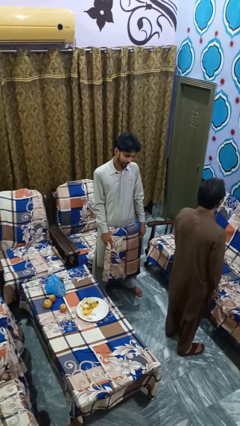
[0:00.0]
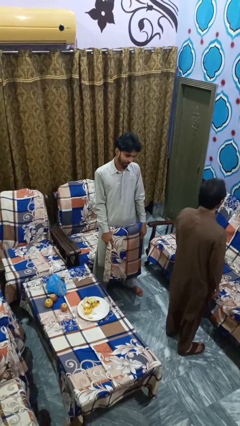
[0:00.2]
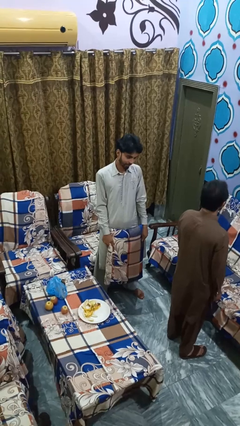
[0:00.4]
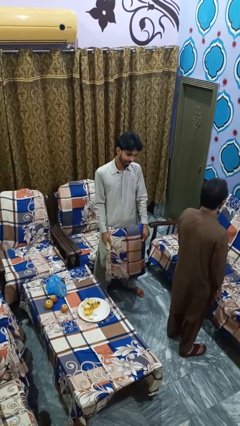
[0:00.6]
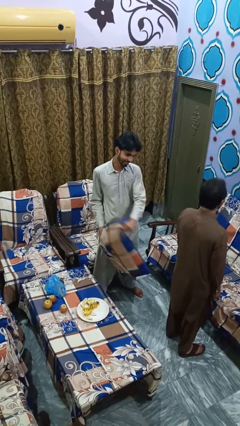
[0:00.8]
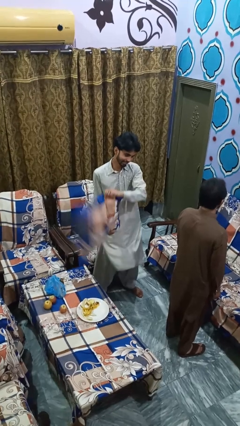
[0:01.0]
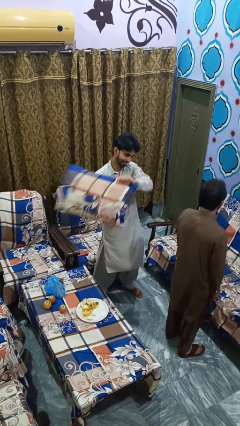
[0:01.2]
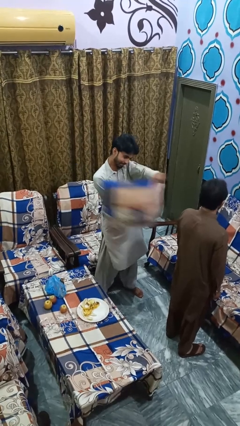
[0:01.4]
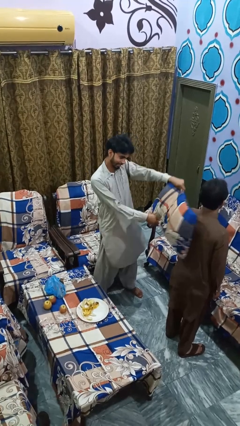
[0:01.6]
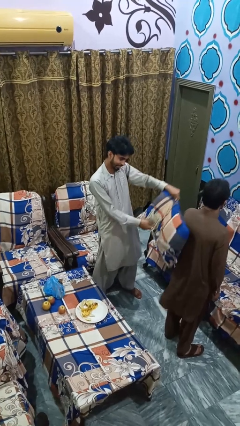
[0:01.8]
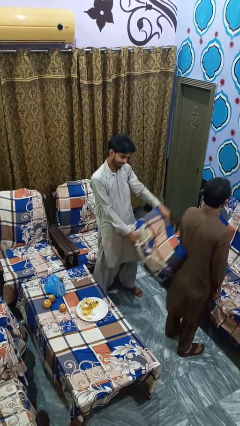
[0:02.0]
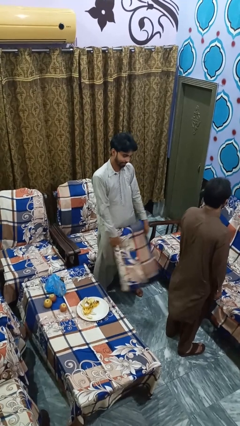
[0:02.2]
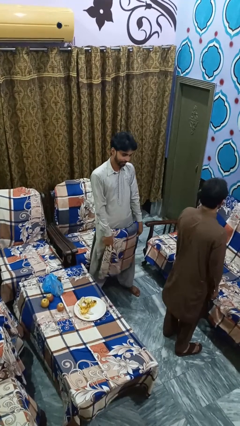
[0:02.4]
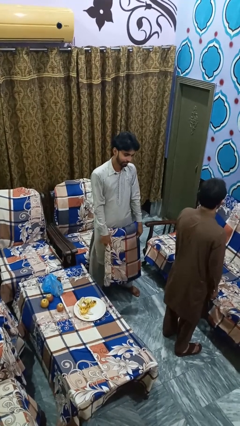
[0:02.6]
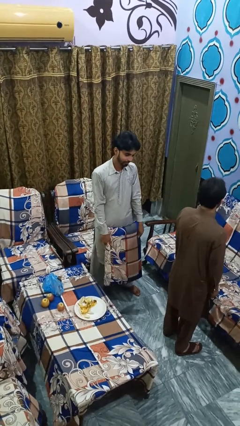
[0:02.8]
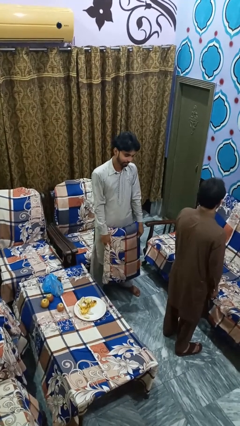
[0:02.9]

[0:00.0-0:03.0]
person hits person with pillow

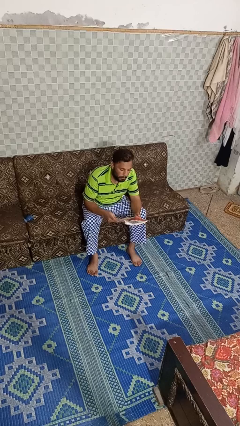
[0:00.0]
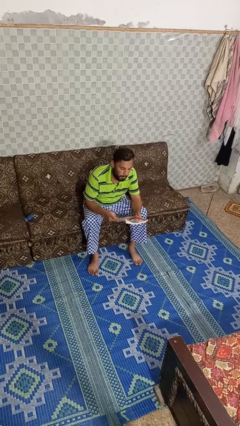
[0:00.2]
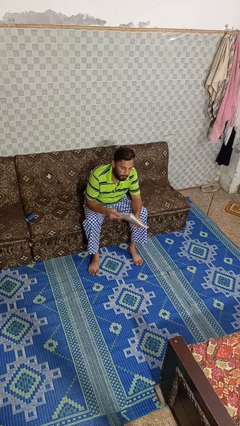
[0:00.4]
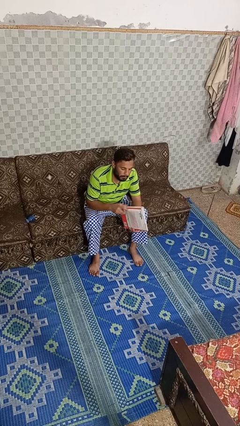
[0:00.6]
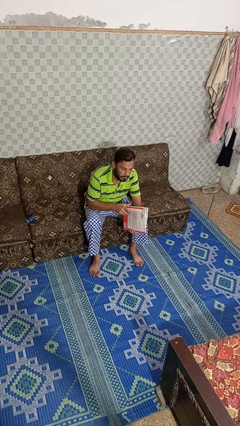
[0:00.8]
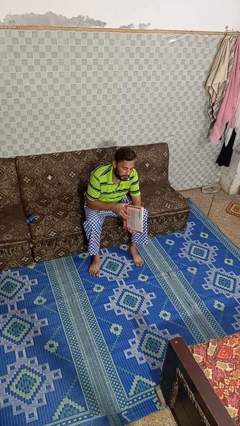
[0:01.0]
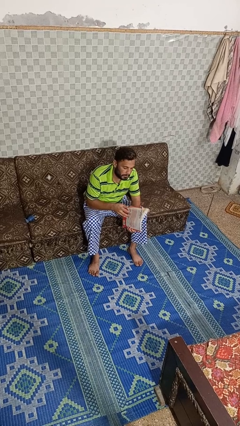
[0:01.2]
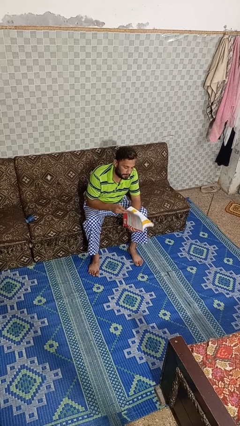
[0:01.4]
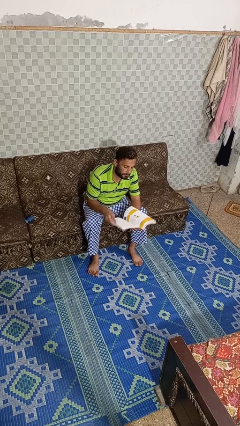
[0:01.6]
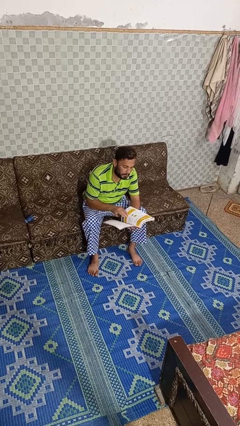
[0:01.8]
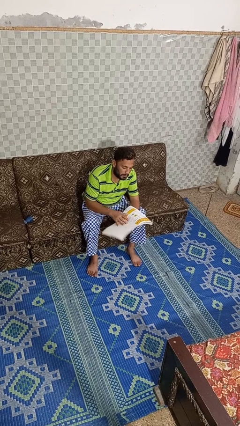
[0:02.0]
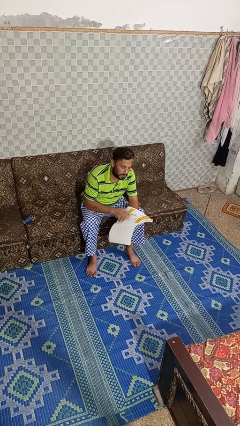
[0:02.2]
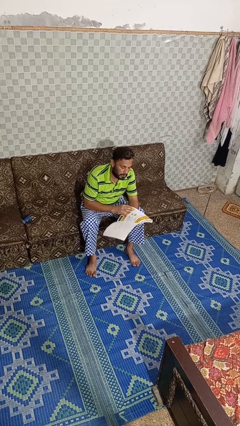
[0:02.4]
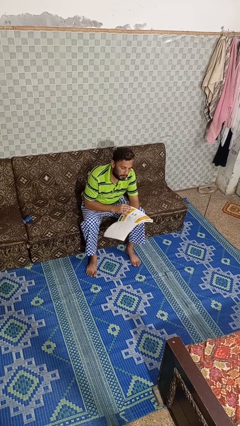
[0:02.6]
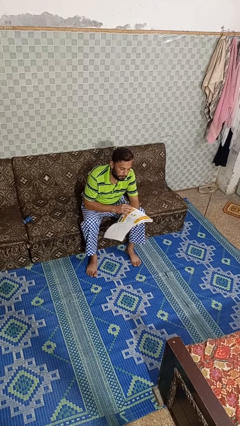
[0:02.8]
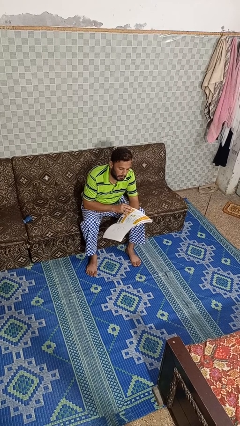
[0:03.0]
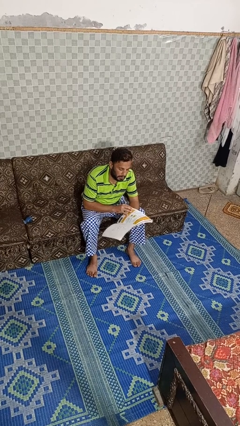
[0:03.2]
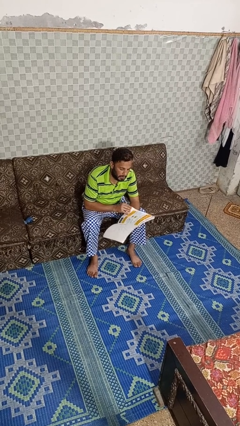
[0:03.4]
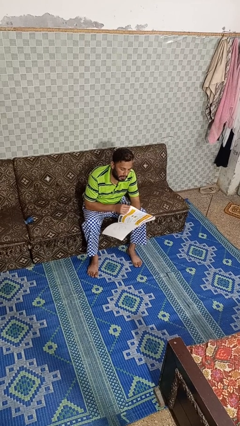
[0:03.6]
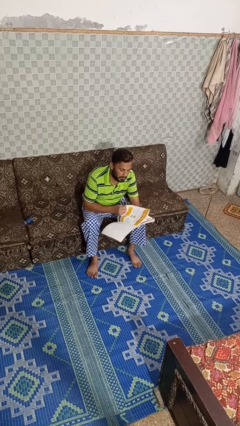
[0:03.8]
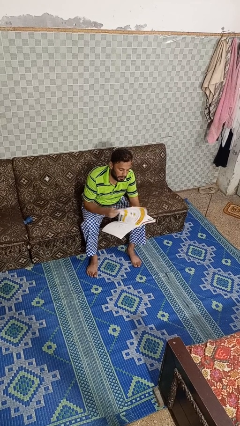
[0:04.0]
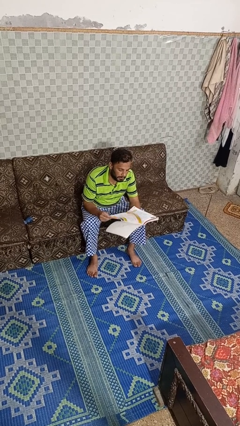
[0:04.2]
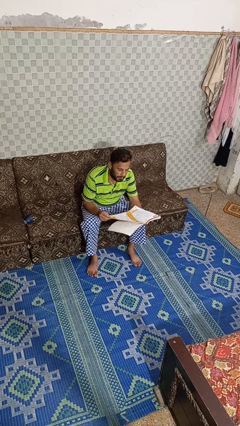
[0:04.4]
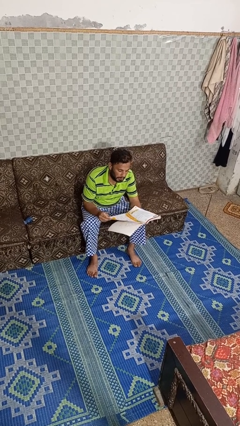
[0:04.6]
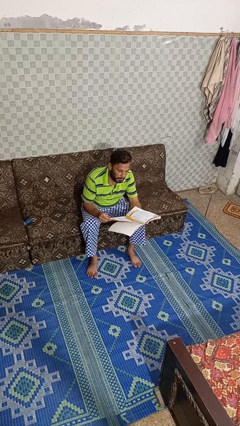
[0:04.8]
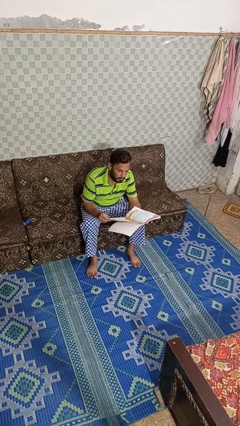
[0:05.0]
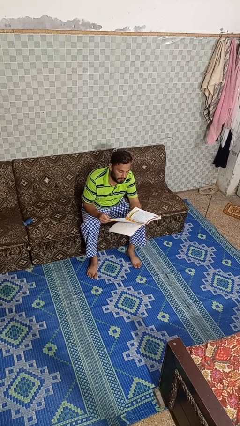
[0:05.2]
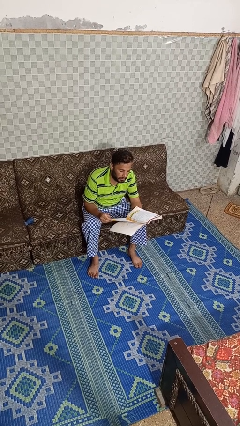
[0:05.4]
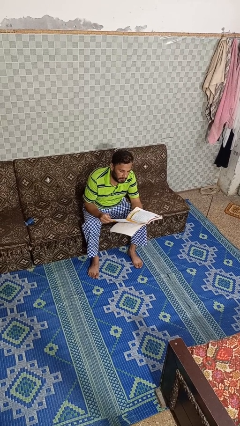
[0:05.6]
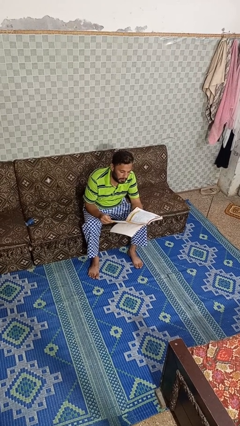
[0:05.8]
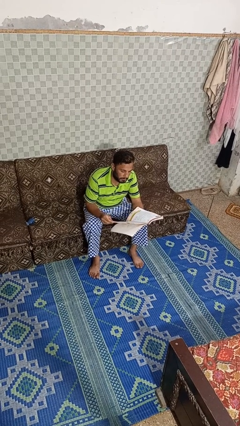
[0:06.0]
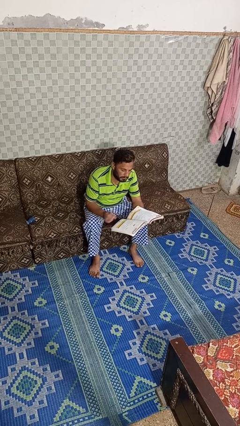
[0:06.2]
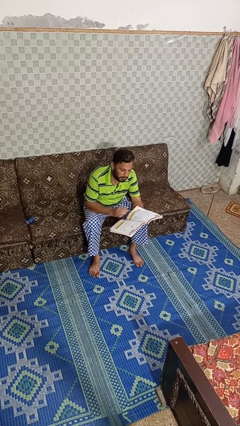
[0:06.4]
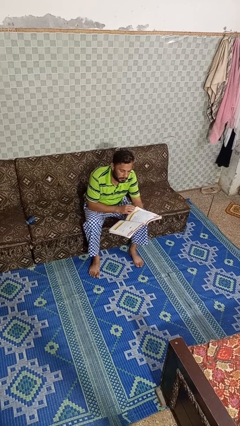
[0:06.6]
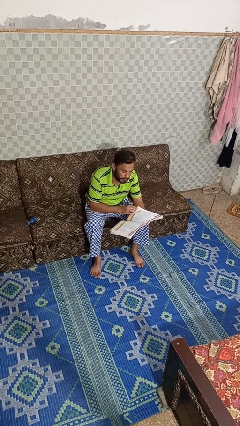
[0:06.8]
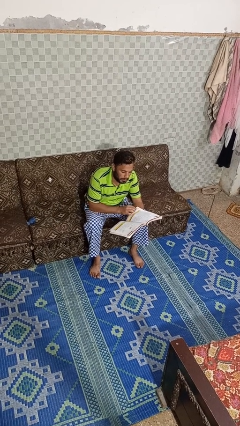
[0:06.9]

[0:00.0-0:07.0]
person reads book

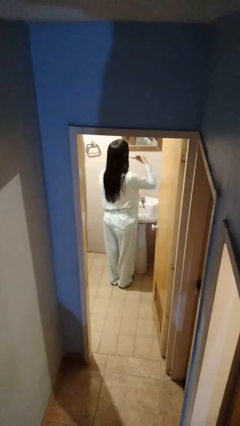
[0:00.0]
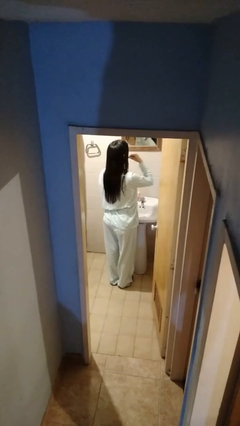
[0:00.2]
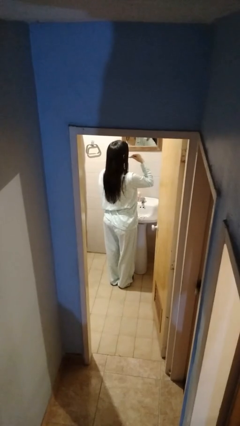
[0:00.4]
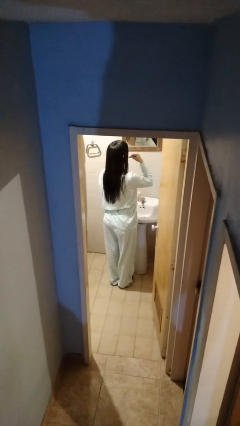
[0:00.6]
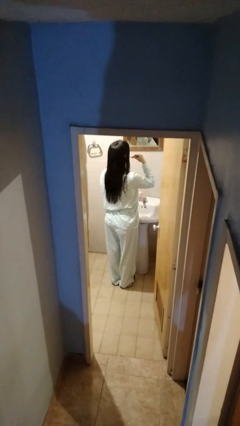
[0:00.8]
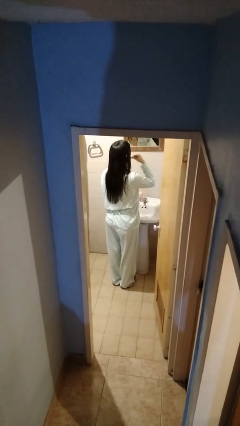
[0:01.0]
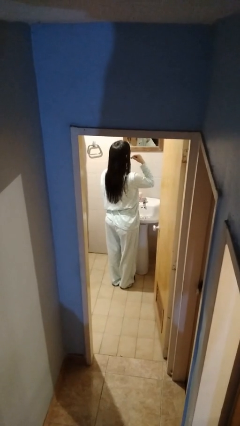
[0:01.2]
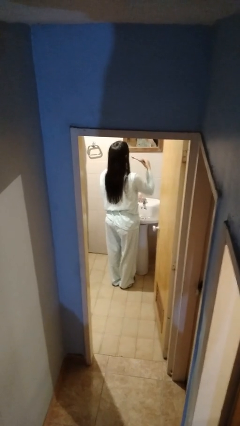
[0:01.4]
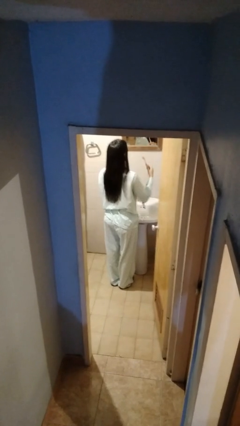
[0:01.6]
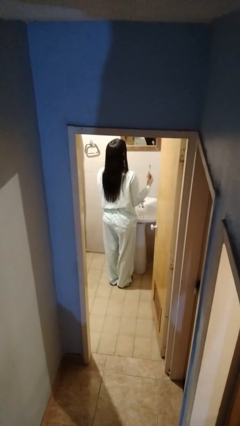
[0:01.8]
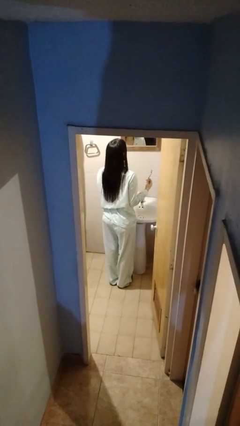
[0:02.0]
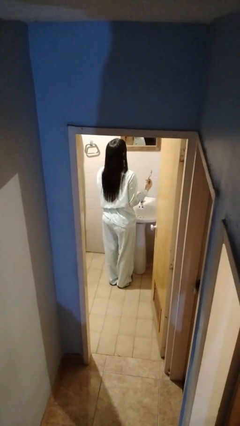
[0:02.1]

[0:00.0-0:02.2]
person brushes teeth

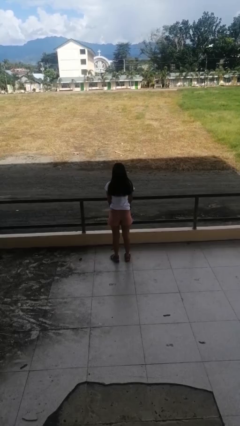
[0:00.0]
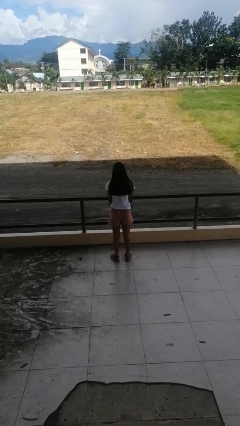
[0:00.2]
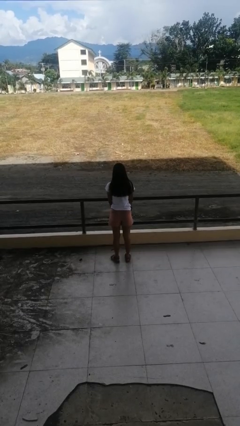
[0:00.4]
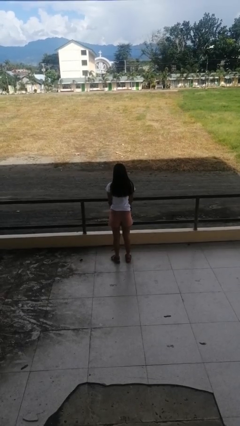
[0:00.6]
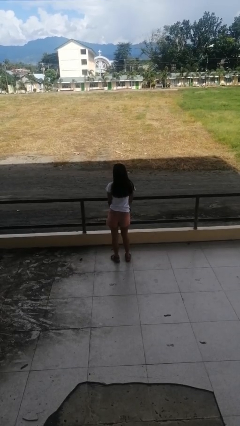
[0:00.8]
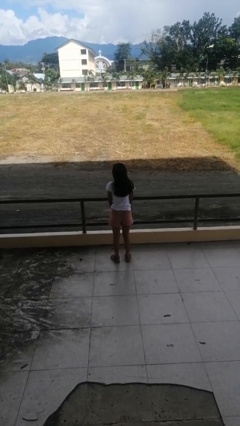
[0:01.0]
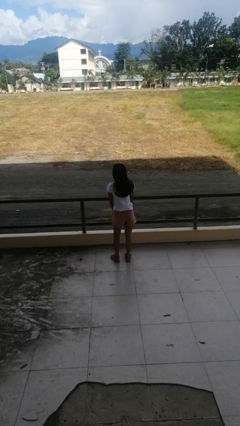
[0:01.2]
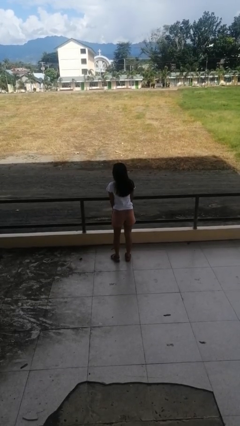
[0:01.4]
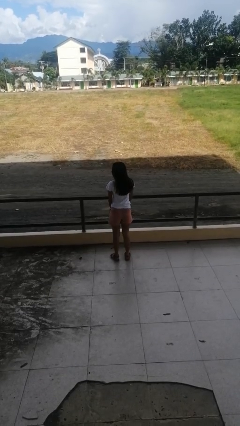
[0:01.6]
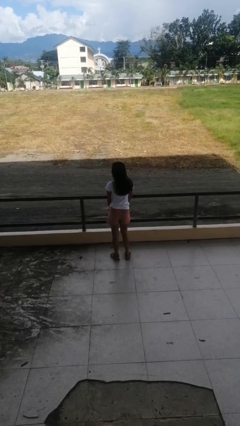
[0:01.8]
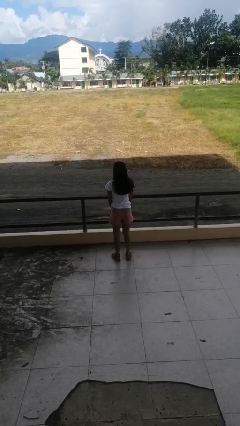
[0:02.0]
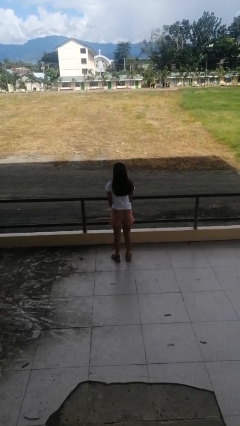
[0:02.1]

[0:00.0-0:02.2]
person wiggles hips

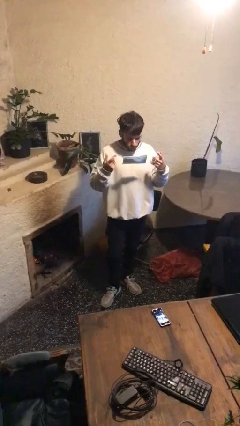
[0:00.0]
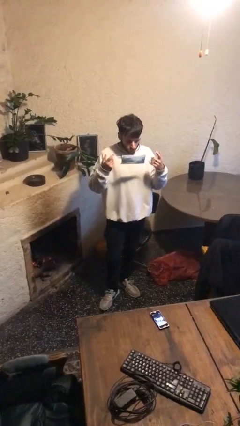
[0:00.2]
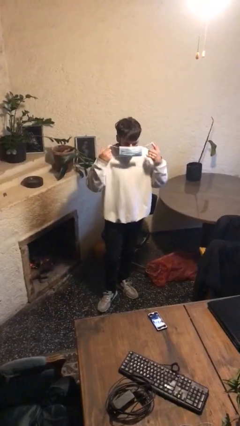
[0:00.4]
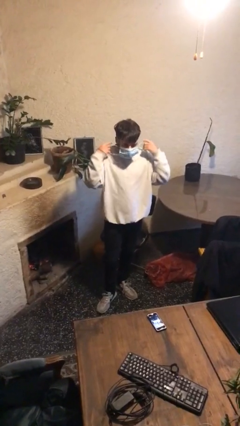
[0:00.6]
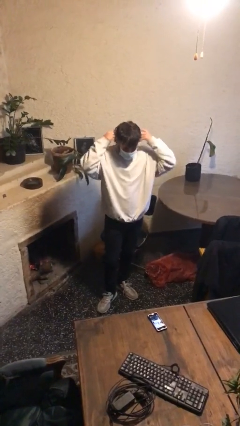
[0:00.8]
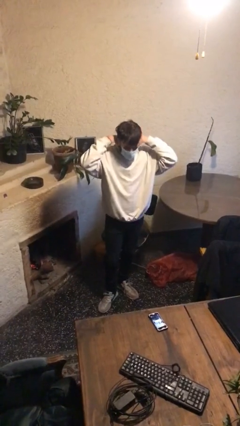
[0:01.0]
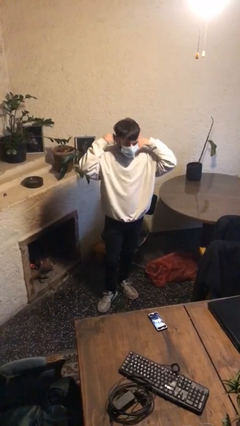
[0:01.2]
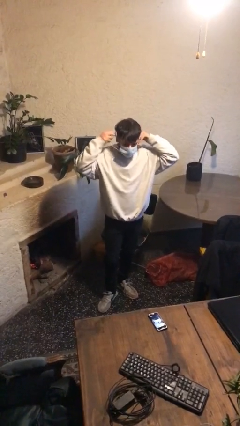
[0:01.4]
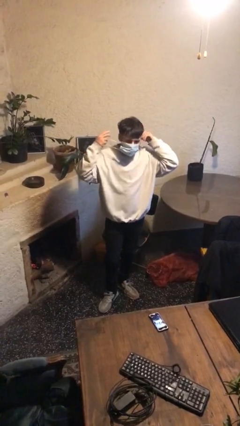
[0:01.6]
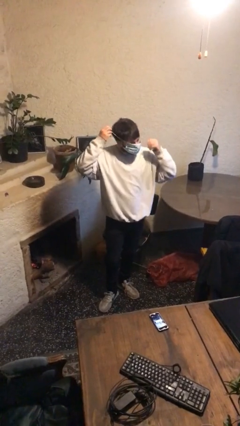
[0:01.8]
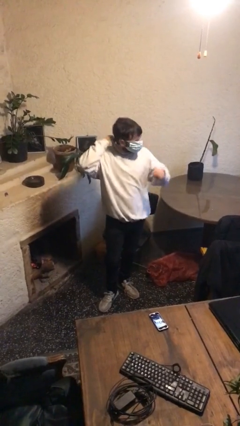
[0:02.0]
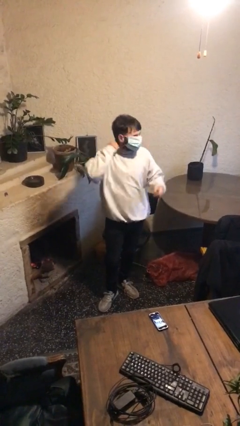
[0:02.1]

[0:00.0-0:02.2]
person puts on facemask

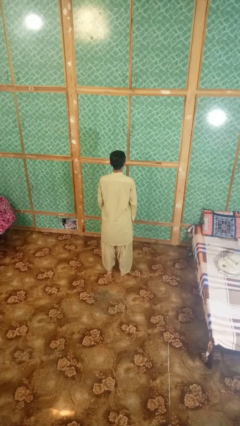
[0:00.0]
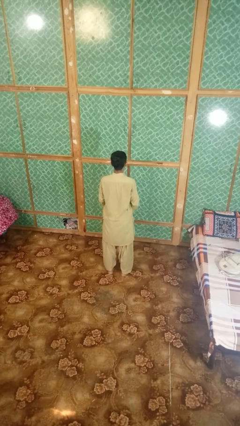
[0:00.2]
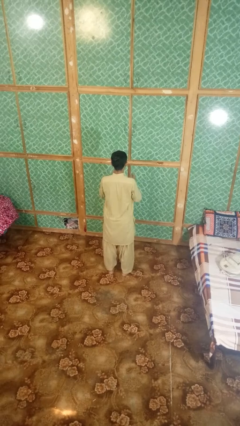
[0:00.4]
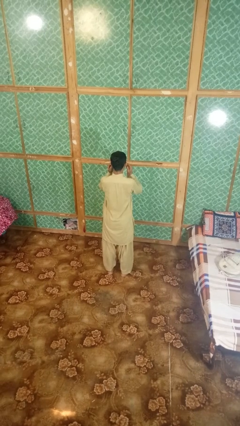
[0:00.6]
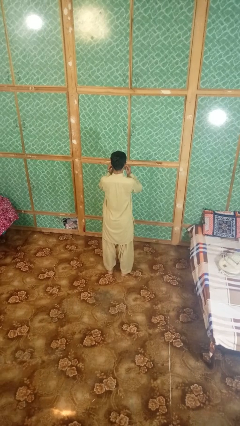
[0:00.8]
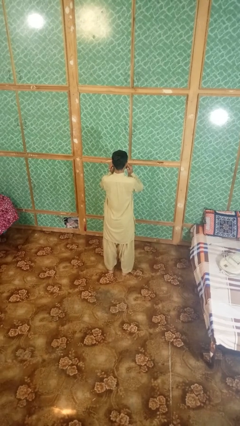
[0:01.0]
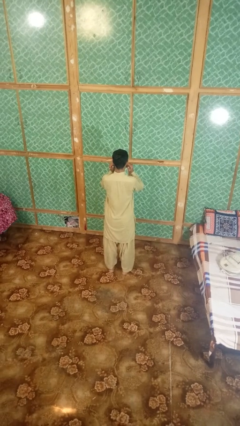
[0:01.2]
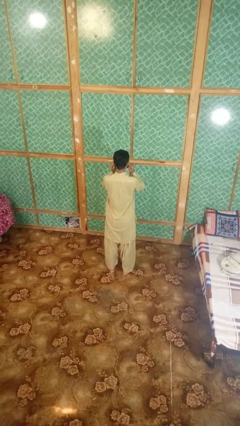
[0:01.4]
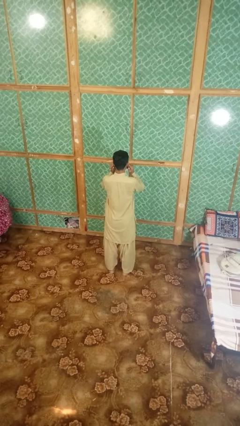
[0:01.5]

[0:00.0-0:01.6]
person puts fingers in ear
